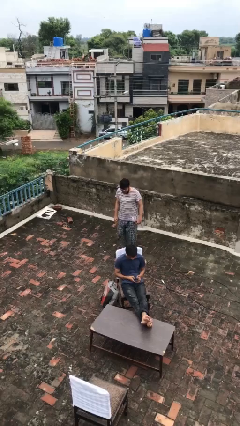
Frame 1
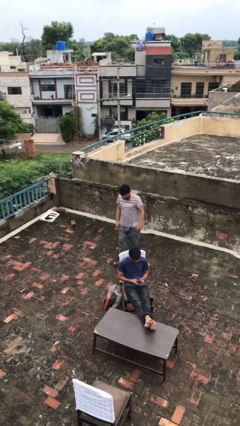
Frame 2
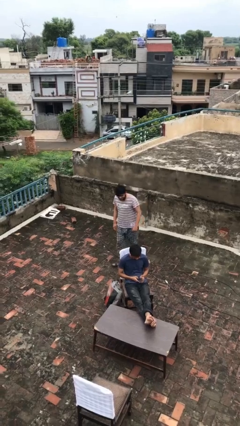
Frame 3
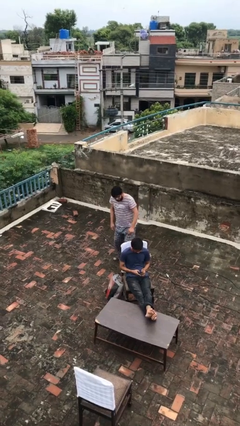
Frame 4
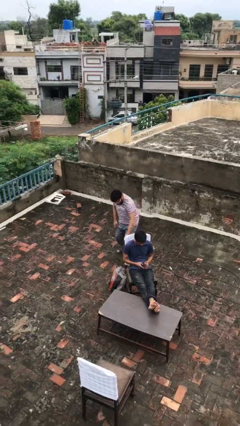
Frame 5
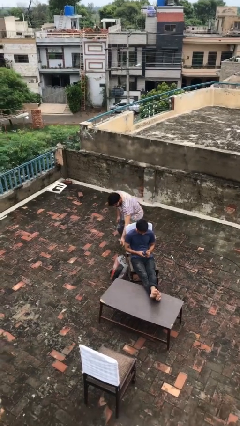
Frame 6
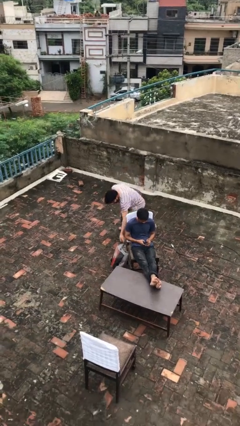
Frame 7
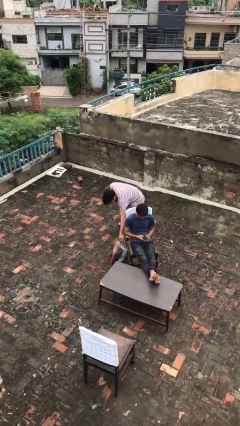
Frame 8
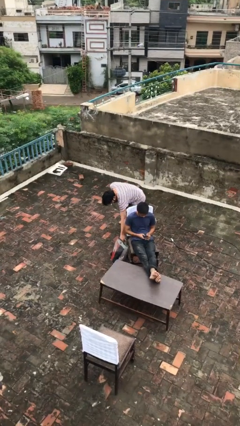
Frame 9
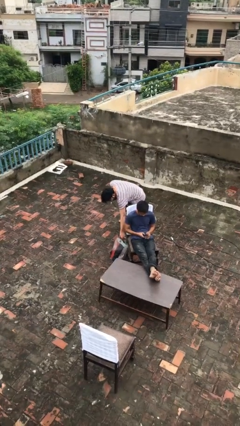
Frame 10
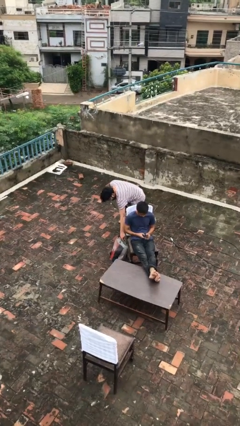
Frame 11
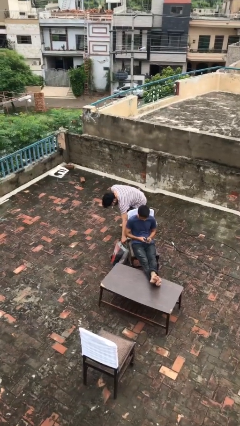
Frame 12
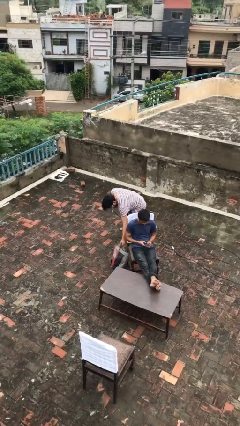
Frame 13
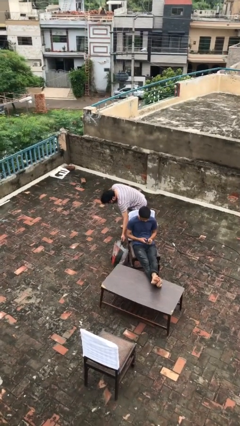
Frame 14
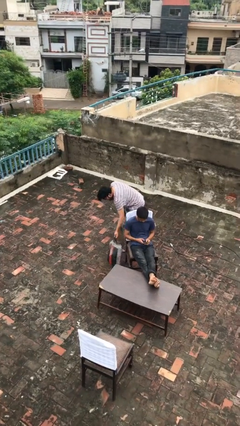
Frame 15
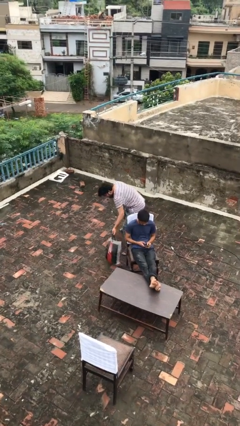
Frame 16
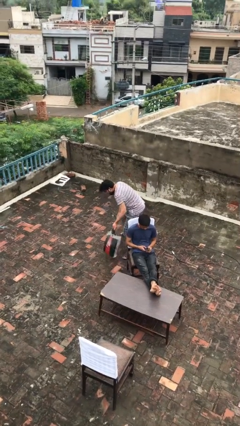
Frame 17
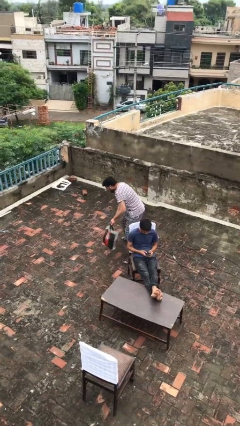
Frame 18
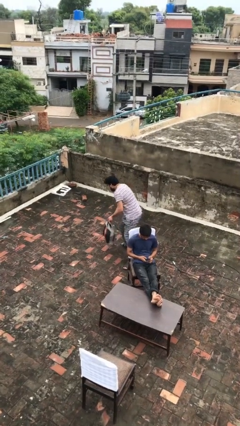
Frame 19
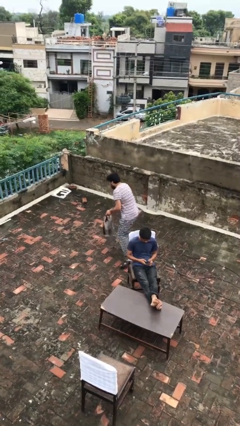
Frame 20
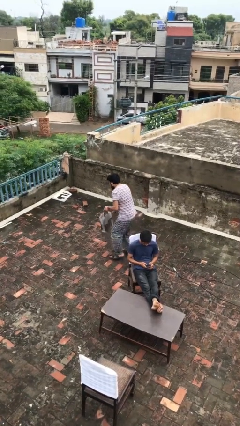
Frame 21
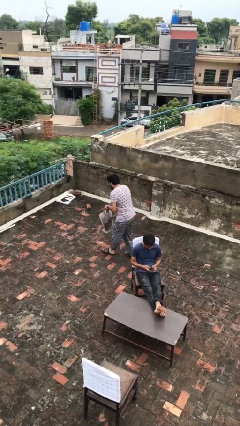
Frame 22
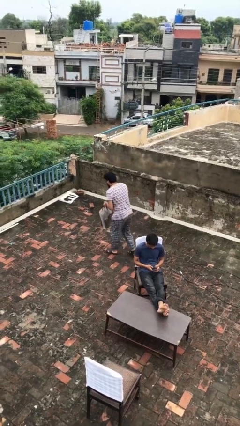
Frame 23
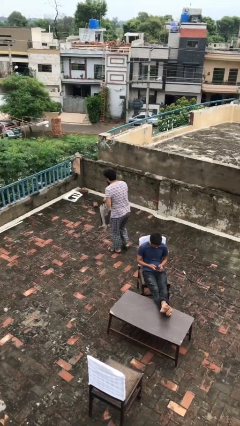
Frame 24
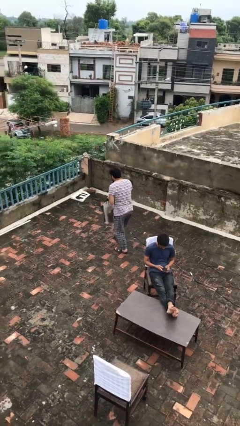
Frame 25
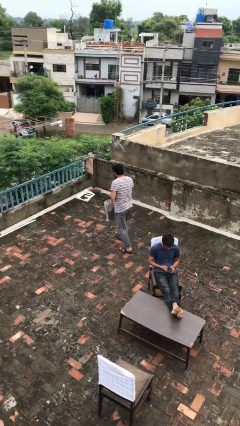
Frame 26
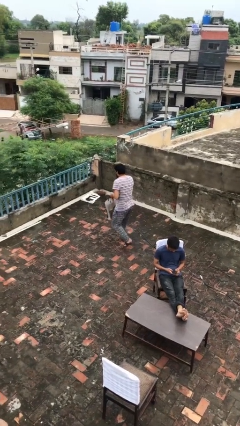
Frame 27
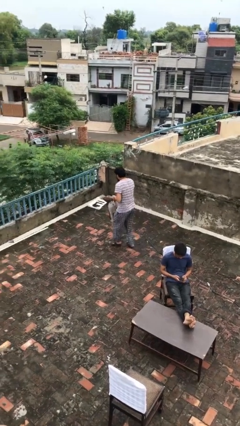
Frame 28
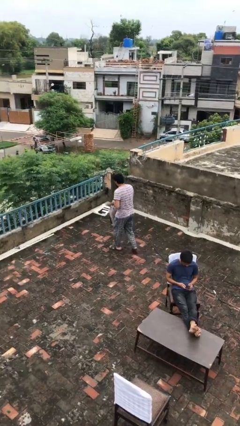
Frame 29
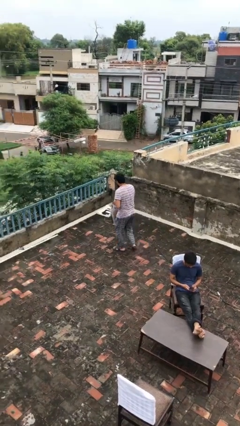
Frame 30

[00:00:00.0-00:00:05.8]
person steals object from person

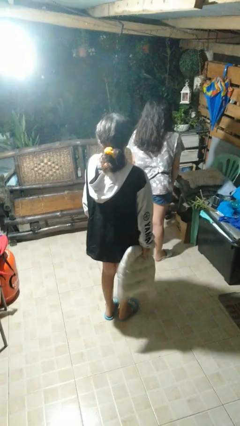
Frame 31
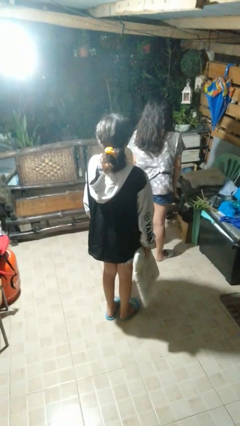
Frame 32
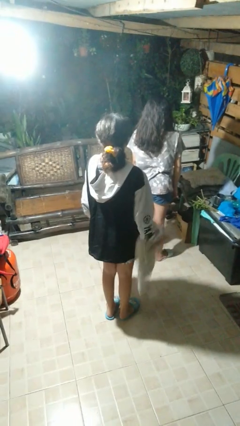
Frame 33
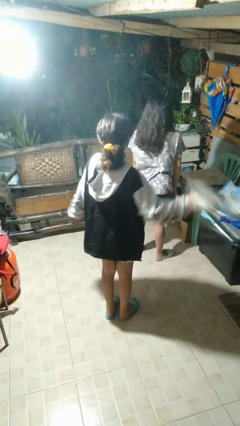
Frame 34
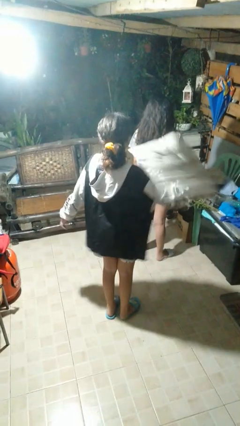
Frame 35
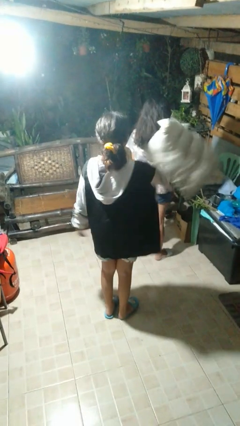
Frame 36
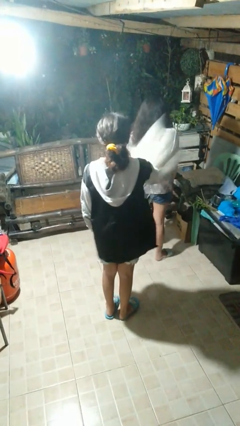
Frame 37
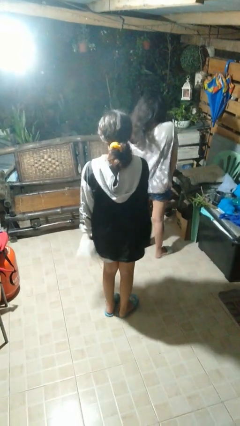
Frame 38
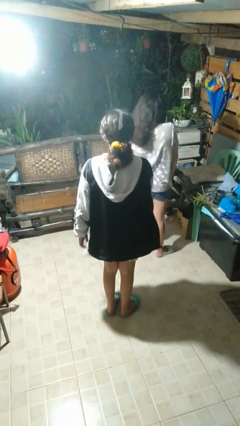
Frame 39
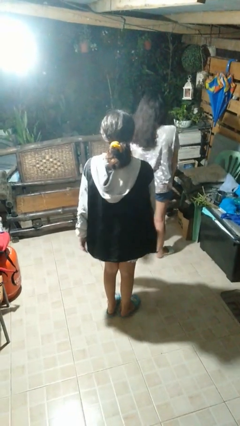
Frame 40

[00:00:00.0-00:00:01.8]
person hits person with pillow

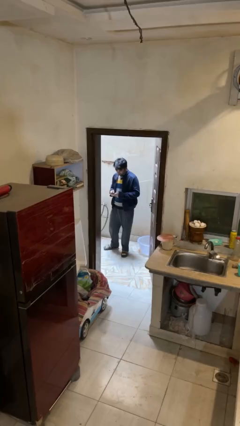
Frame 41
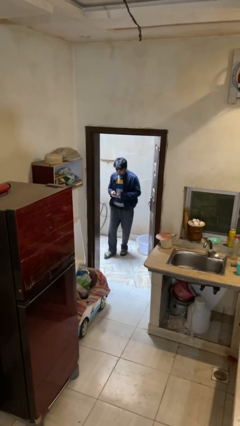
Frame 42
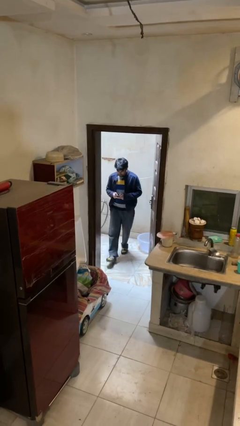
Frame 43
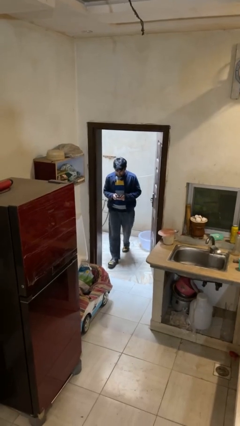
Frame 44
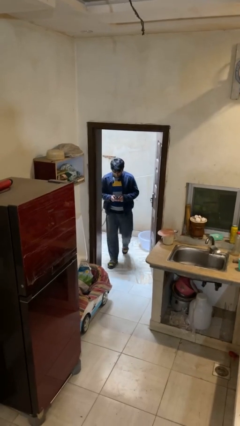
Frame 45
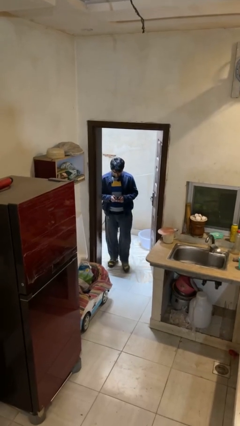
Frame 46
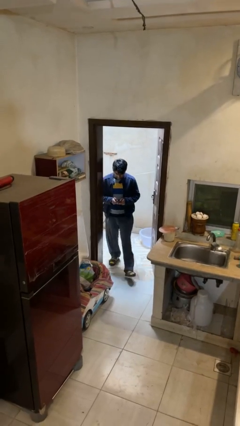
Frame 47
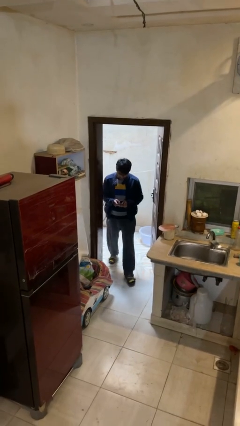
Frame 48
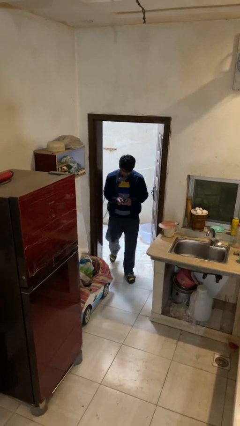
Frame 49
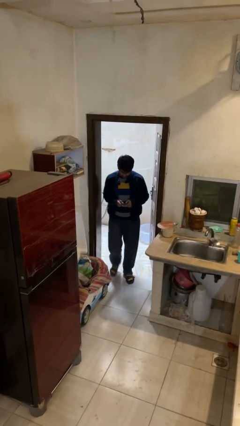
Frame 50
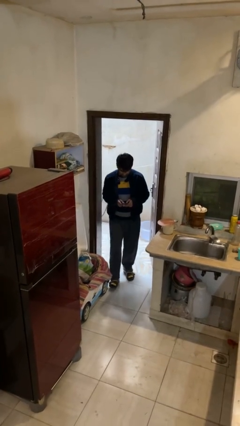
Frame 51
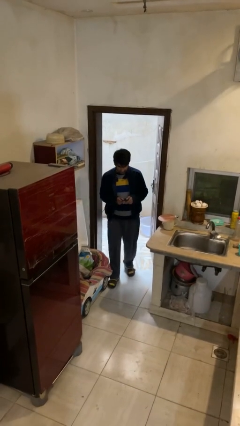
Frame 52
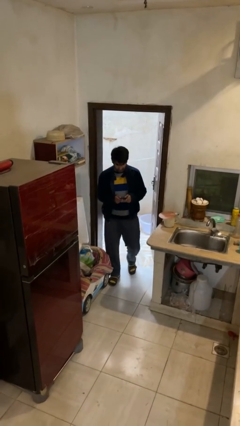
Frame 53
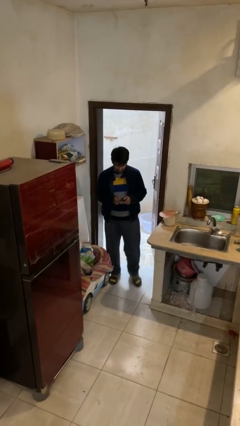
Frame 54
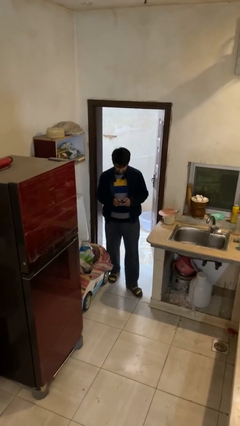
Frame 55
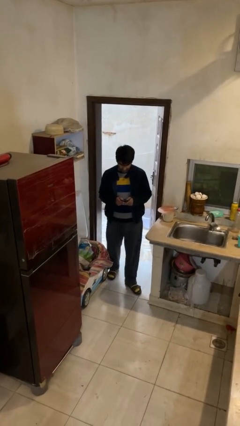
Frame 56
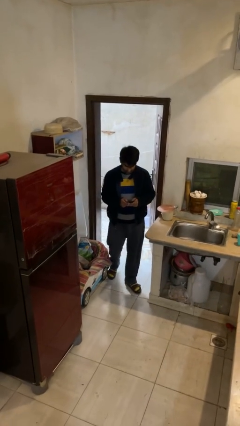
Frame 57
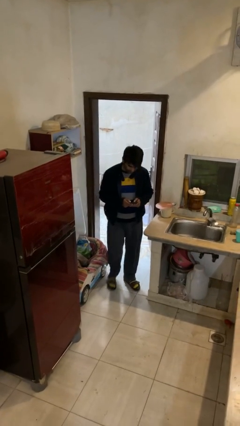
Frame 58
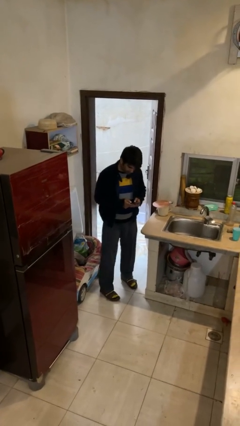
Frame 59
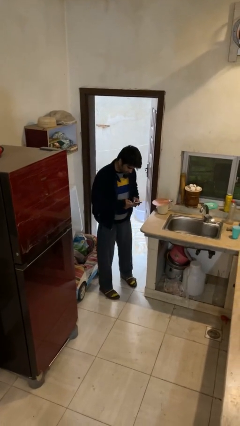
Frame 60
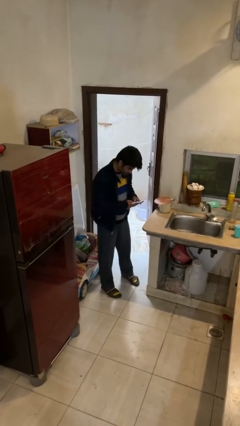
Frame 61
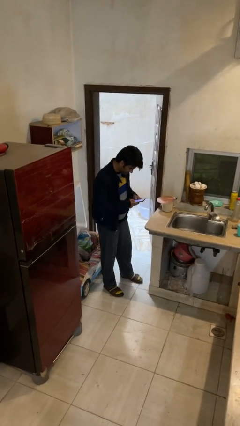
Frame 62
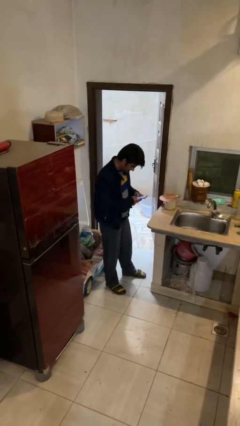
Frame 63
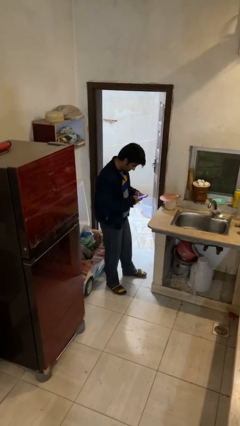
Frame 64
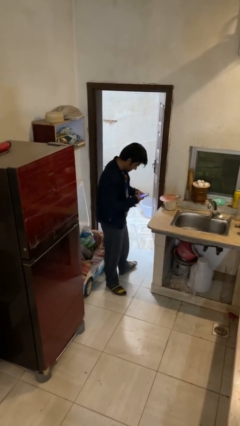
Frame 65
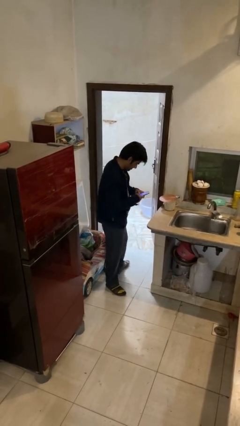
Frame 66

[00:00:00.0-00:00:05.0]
person enters scene through structure

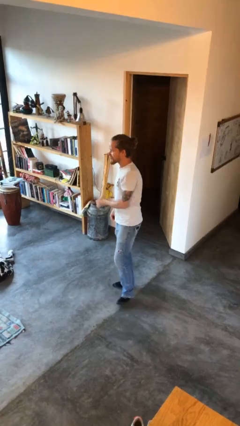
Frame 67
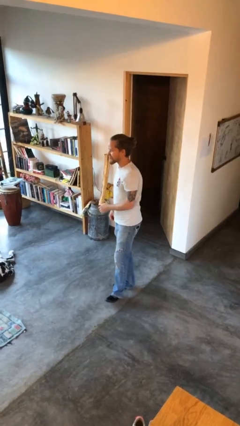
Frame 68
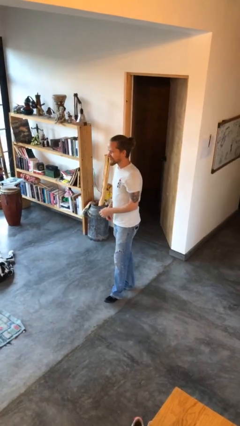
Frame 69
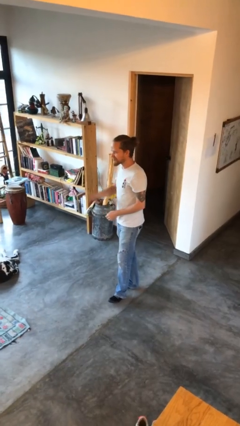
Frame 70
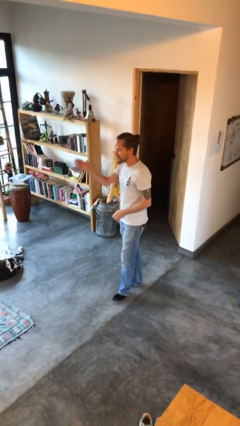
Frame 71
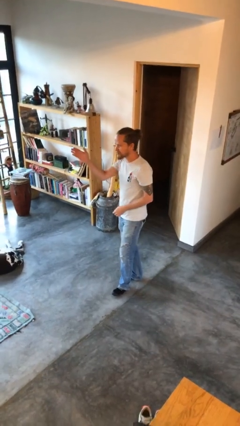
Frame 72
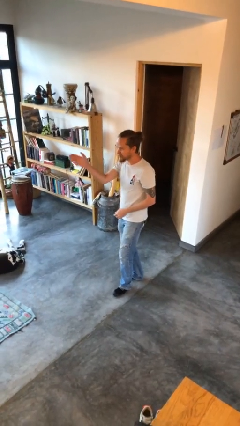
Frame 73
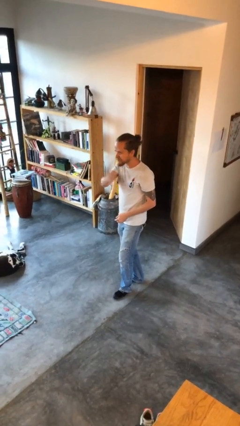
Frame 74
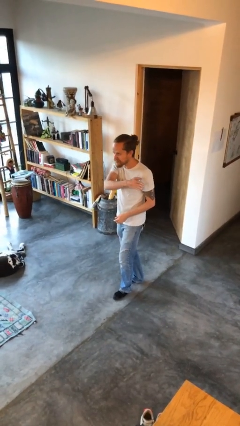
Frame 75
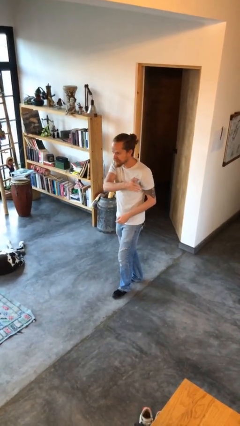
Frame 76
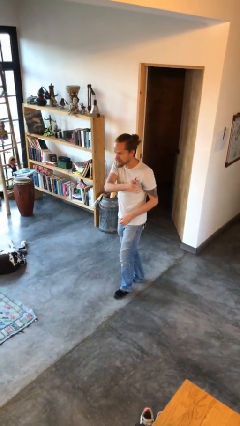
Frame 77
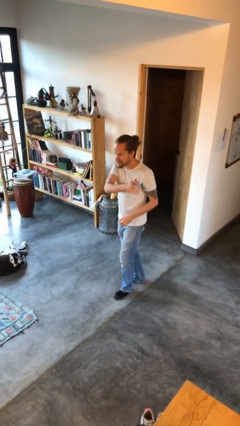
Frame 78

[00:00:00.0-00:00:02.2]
person gestures swipe left

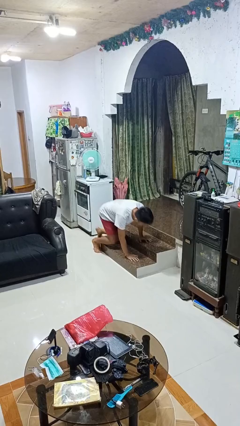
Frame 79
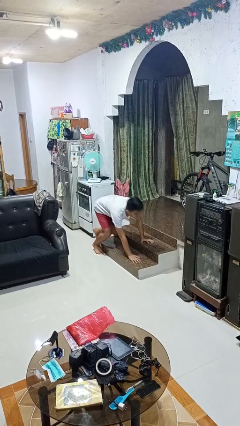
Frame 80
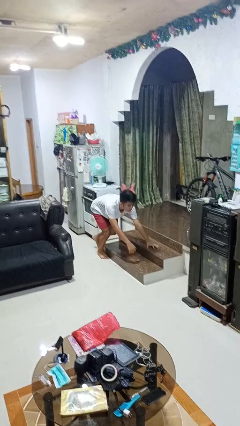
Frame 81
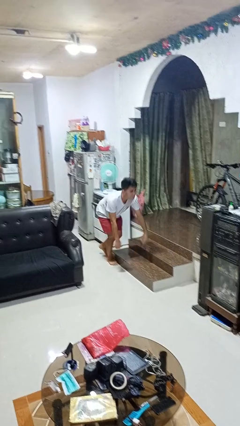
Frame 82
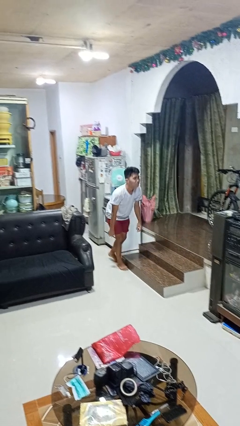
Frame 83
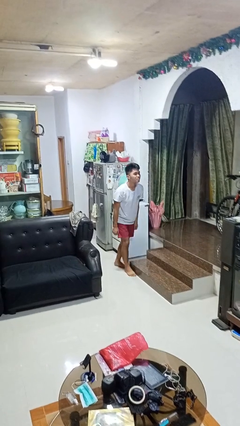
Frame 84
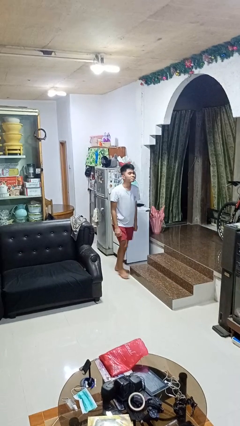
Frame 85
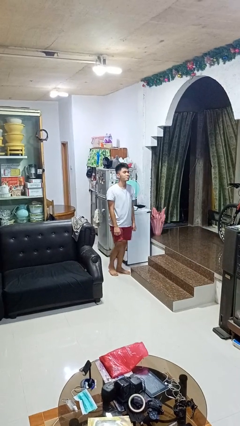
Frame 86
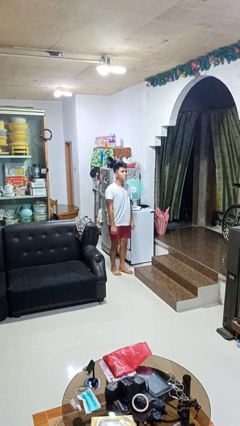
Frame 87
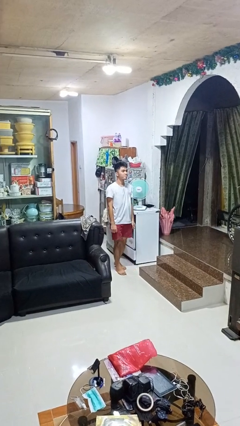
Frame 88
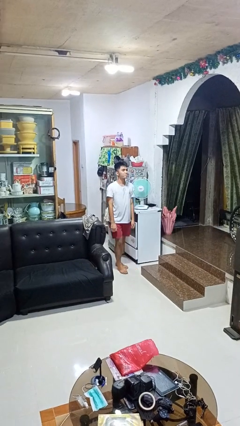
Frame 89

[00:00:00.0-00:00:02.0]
person stands up from floor

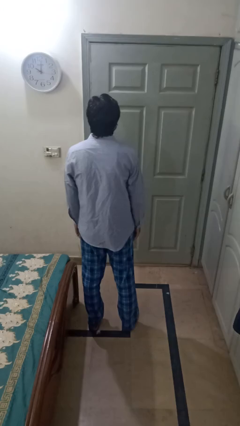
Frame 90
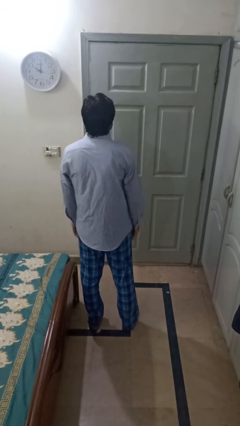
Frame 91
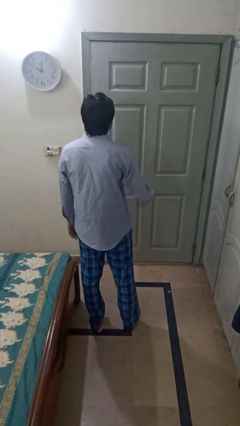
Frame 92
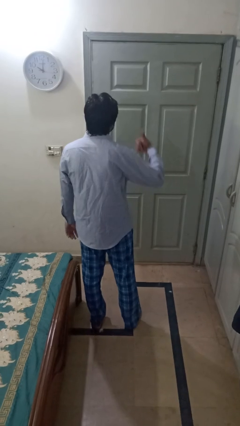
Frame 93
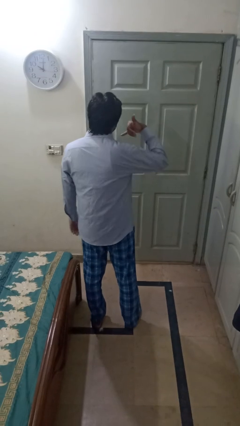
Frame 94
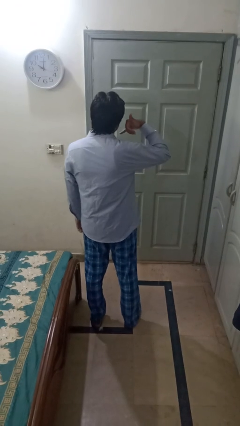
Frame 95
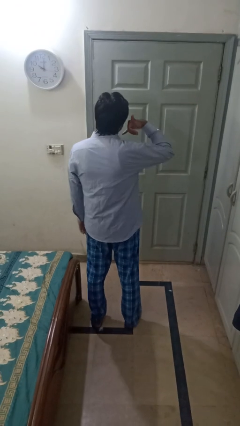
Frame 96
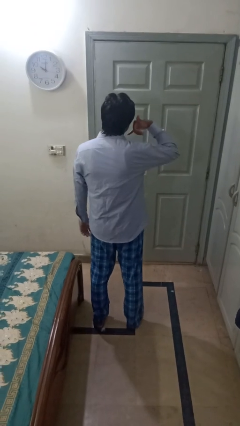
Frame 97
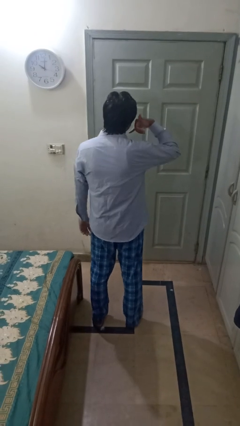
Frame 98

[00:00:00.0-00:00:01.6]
person gestures call me
